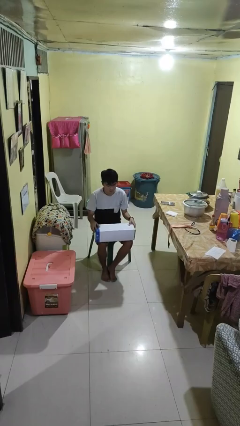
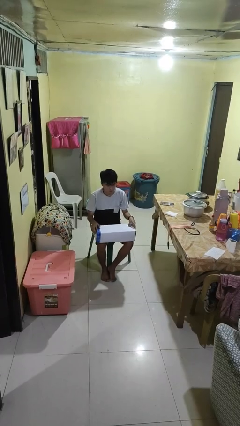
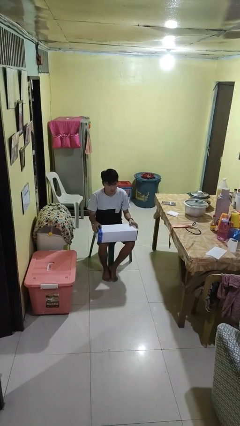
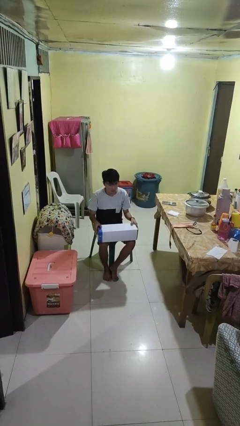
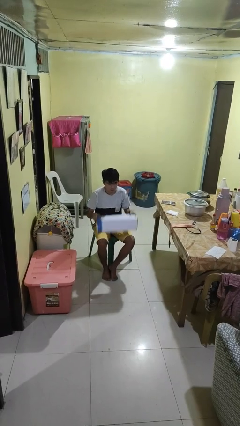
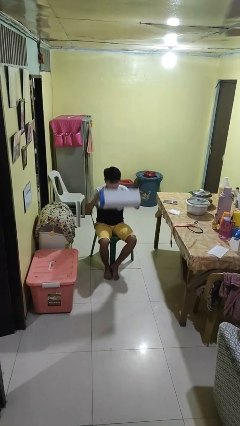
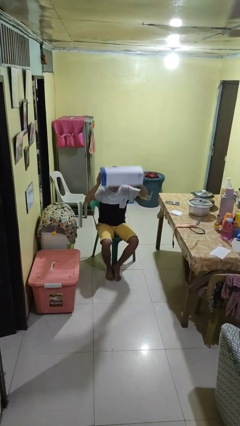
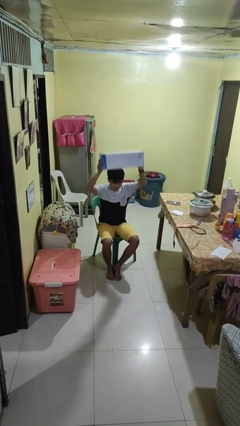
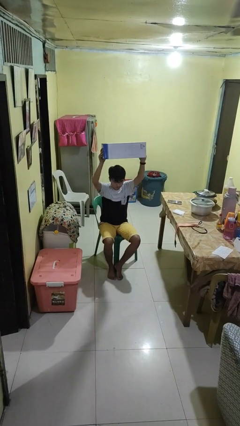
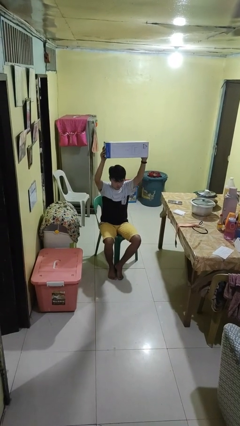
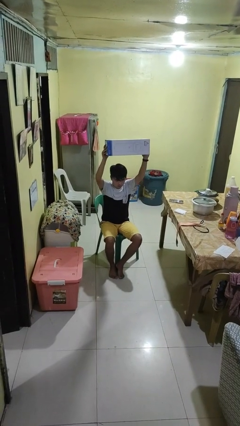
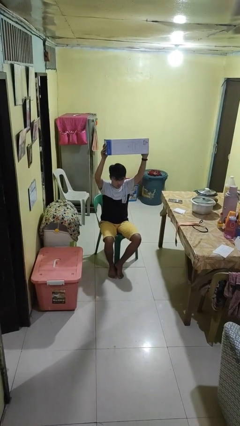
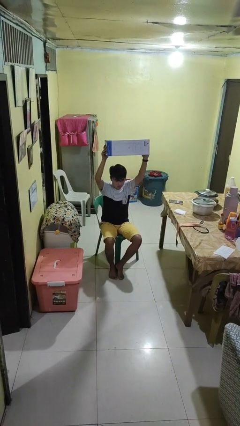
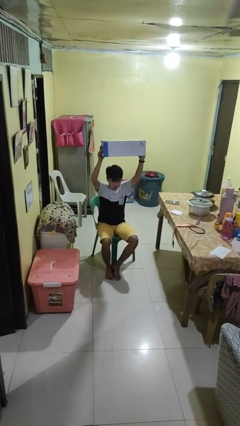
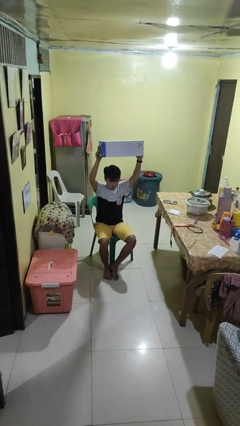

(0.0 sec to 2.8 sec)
person holds object above head

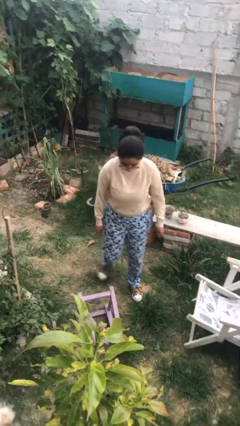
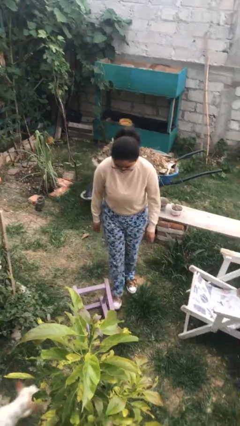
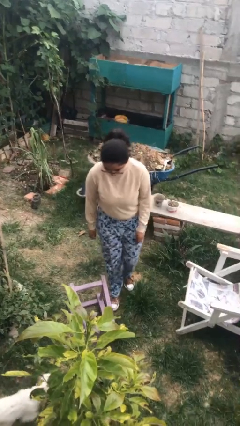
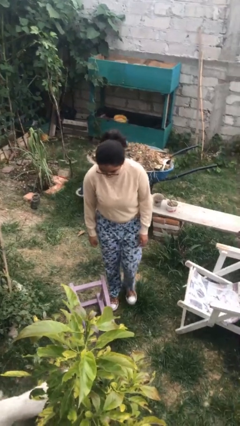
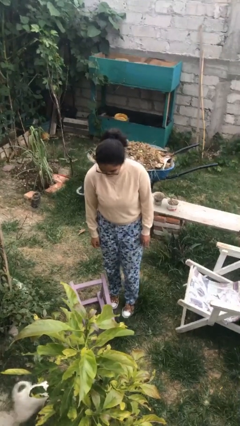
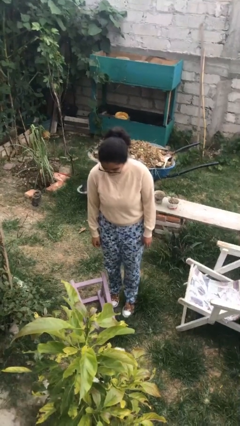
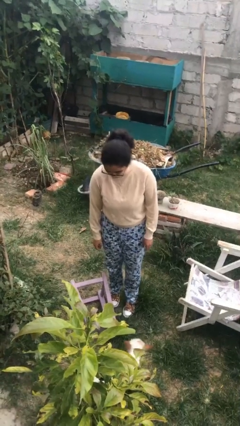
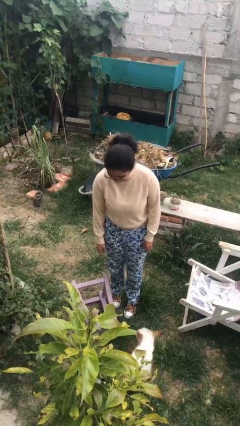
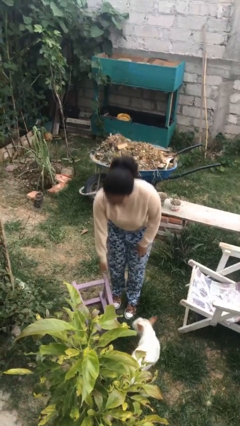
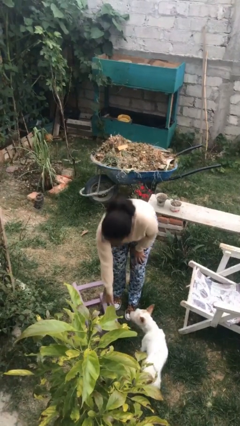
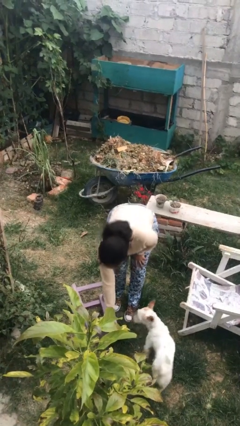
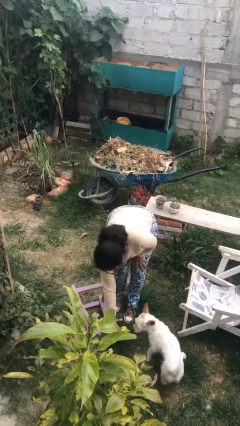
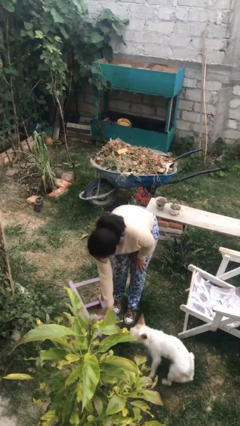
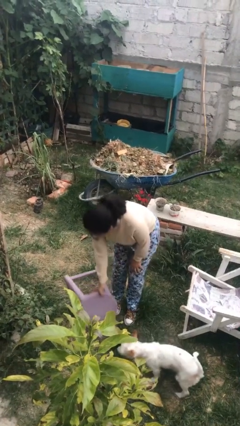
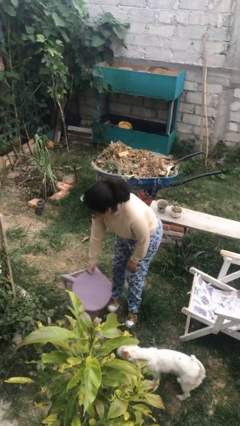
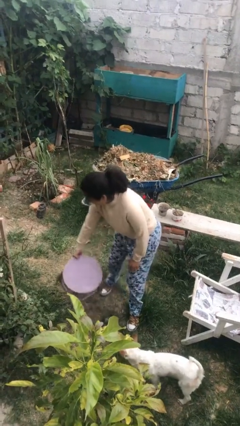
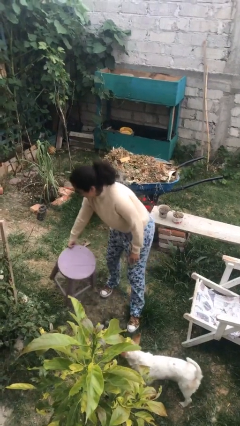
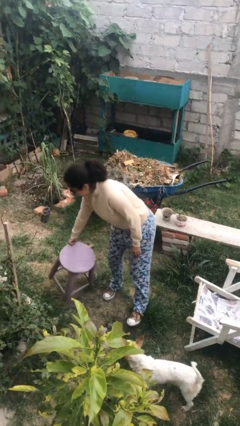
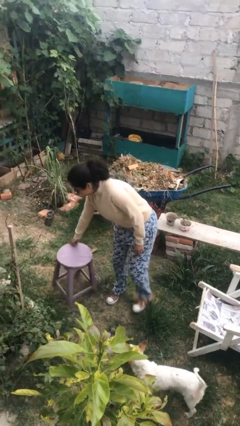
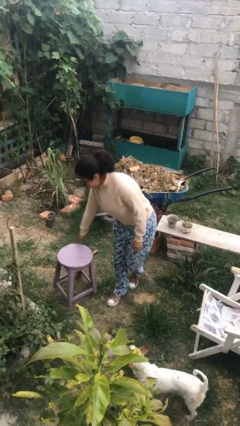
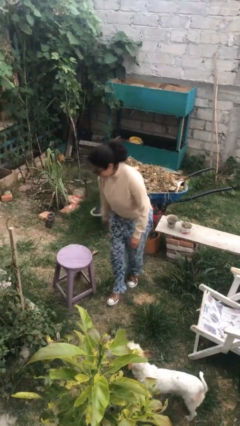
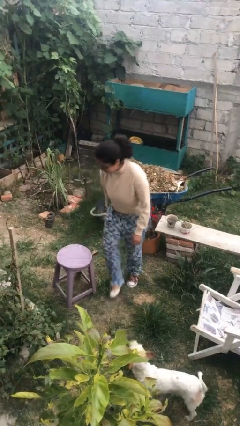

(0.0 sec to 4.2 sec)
person sets upright furniture

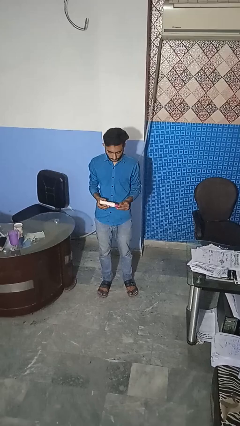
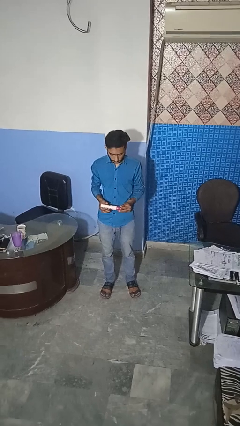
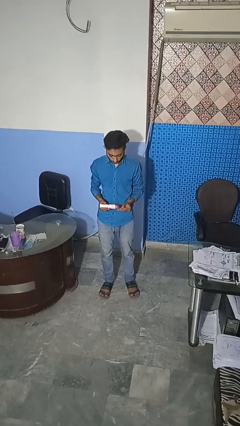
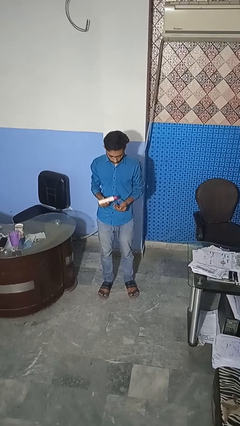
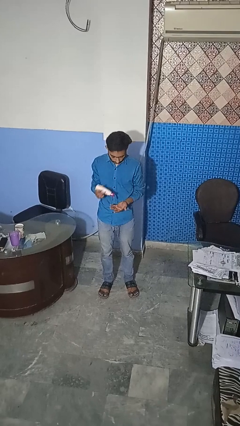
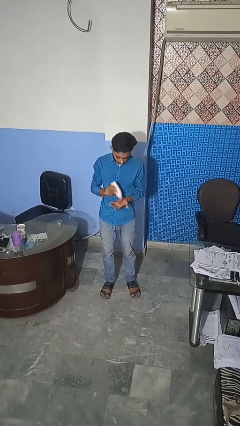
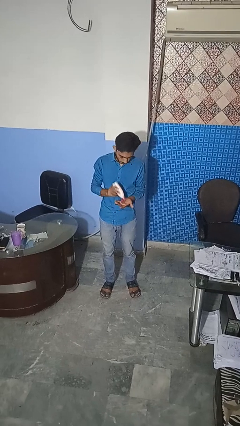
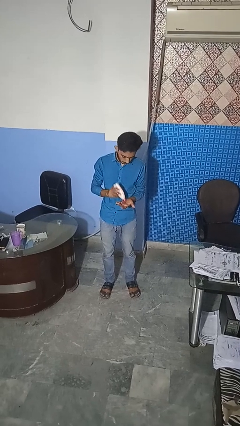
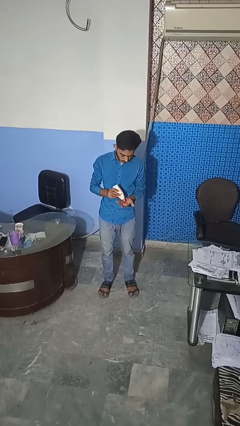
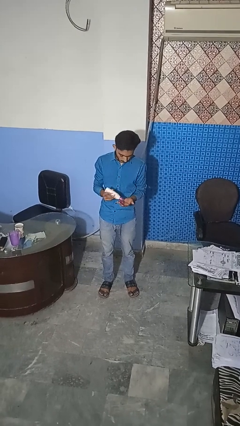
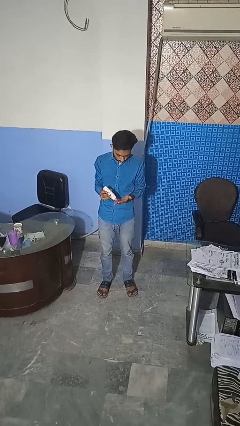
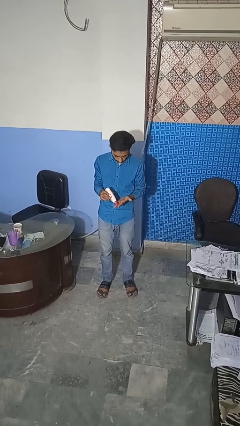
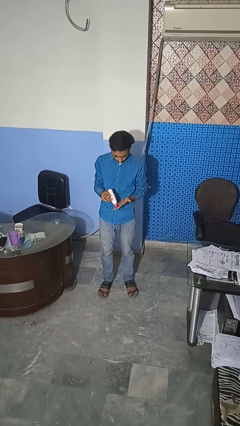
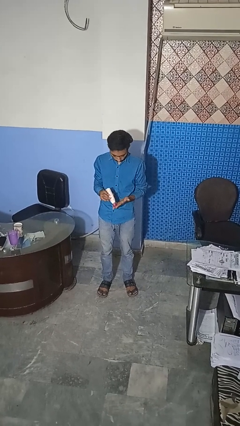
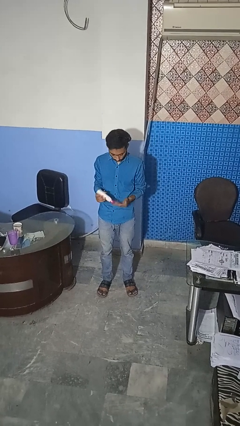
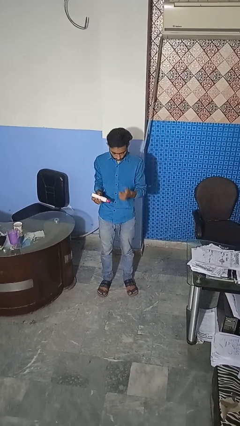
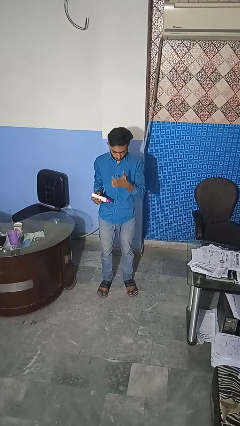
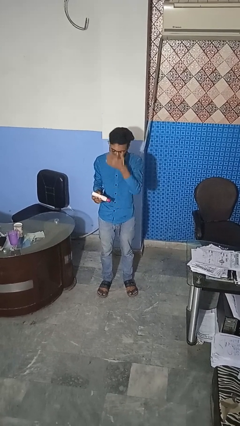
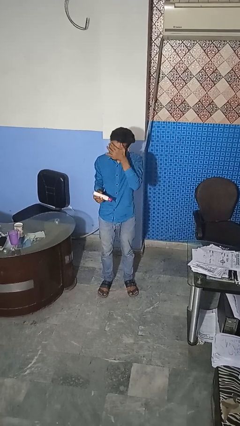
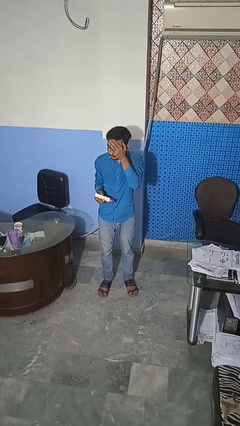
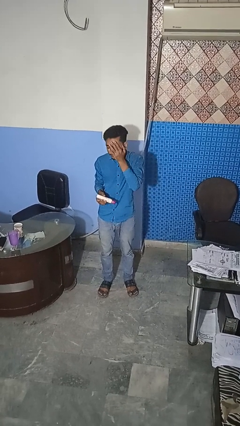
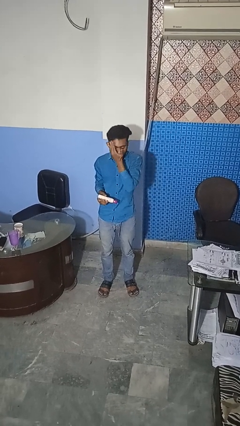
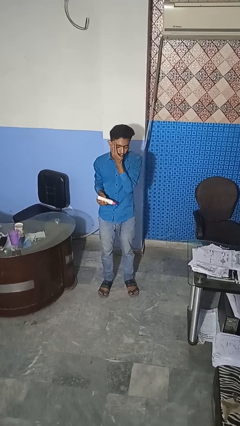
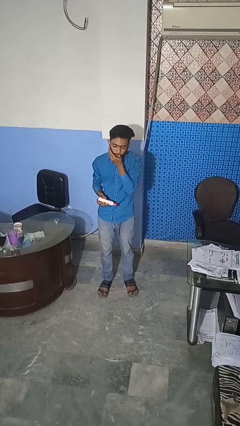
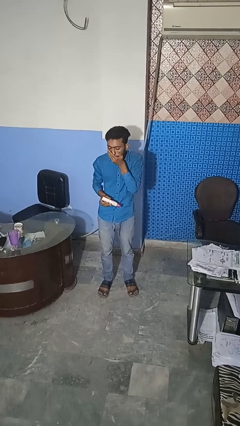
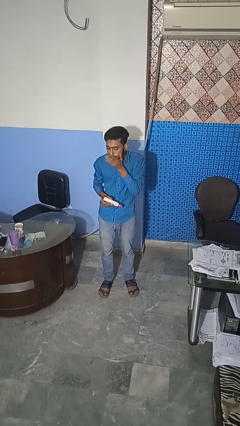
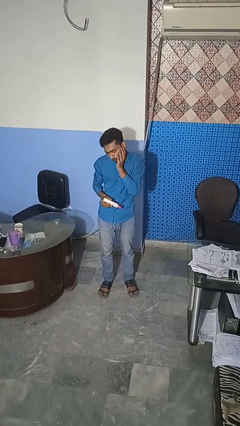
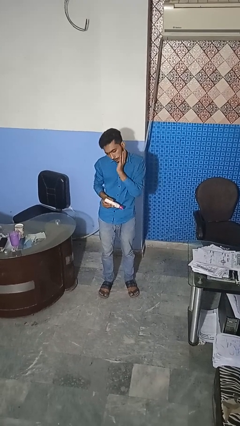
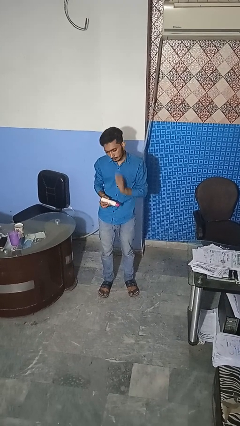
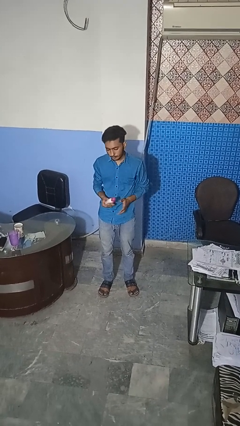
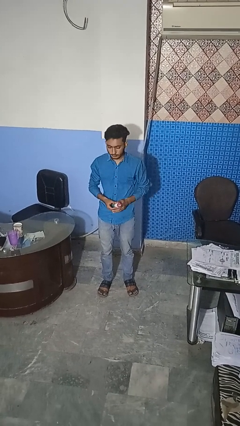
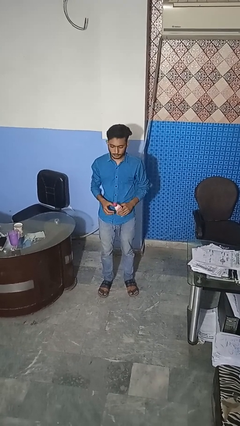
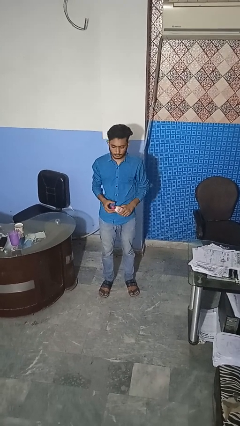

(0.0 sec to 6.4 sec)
person applies facial moisturizer

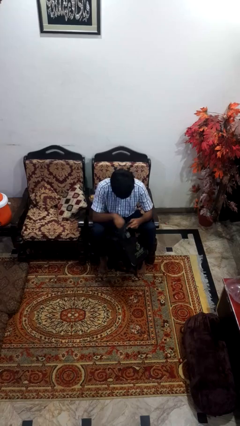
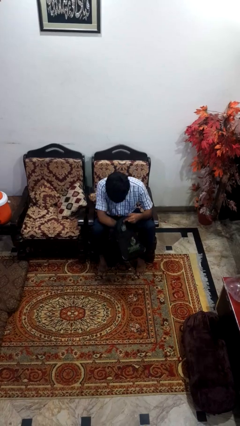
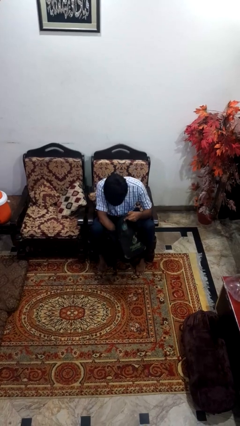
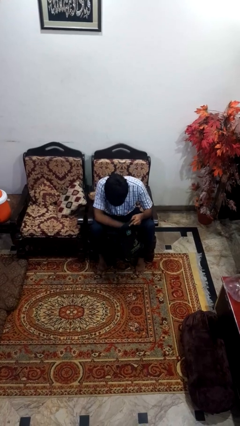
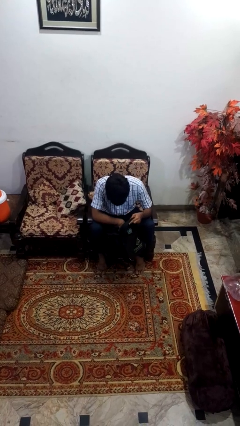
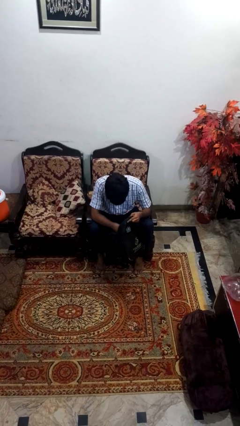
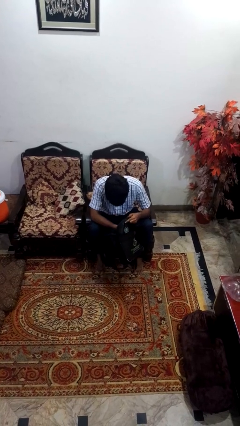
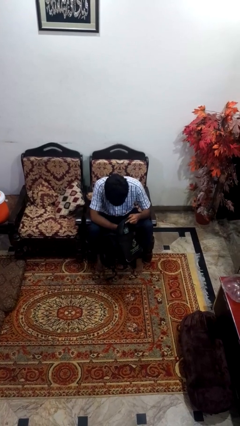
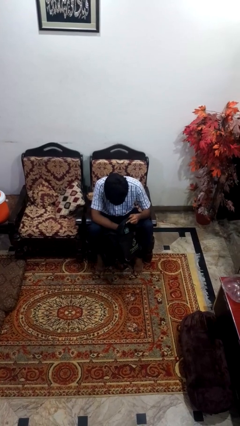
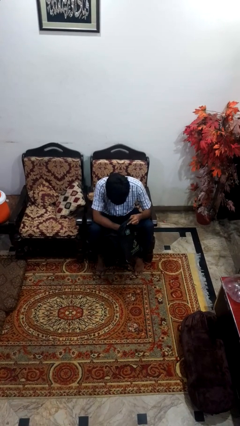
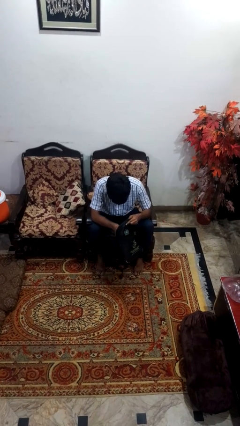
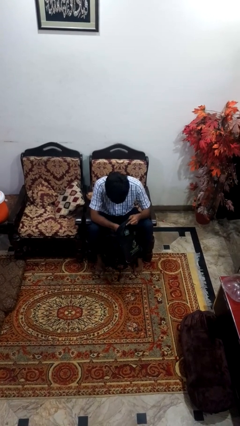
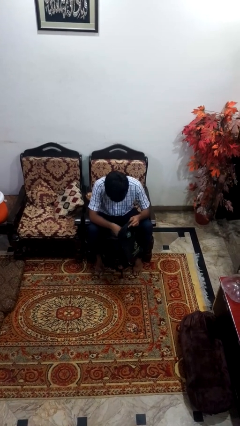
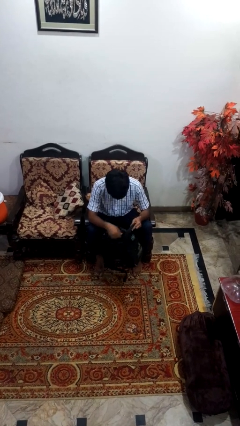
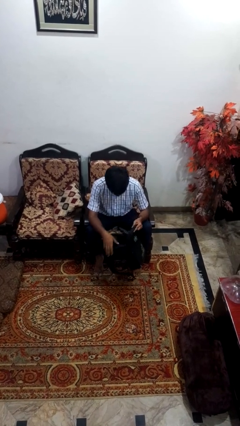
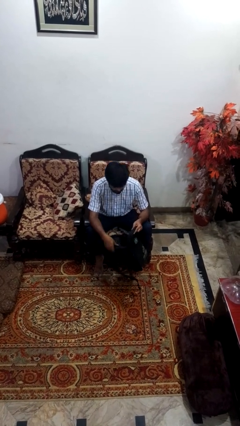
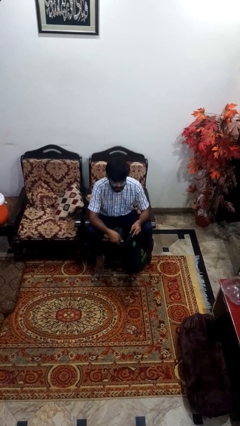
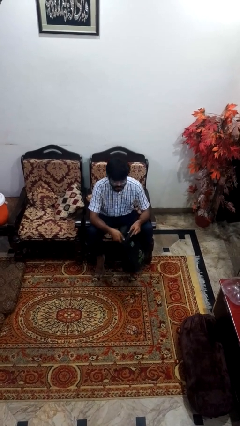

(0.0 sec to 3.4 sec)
person searches in bag

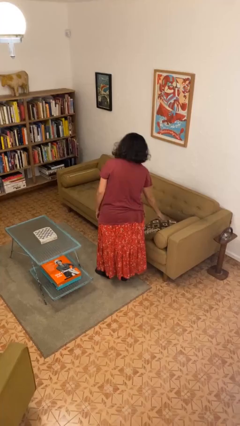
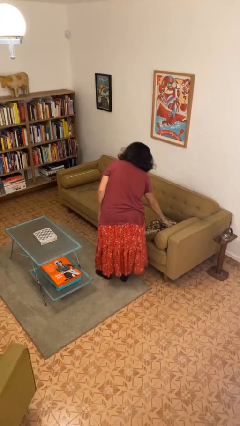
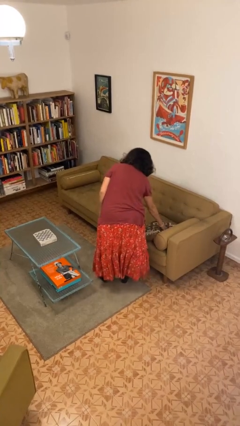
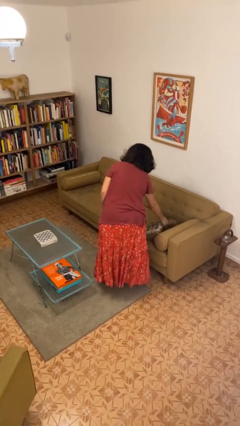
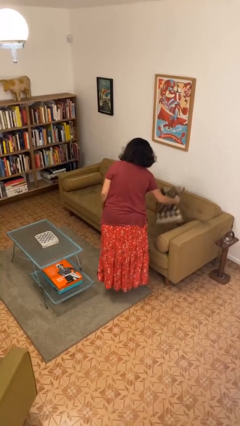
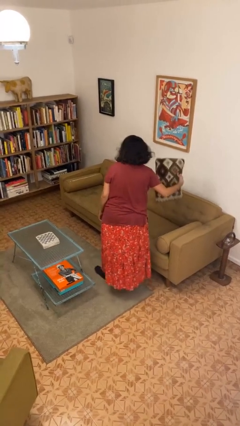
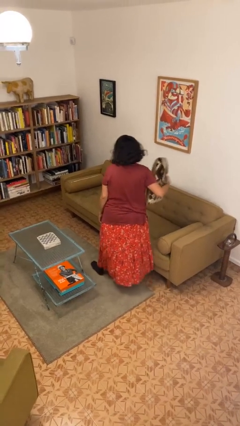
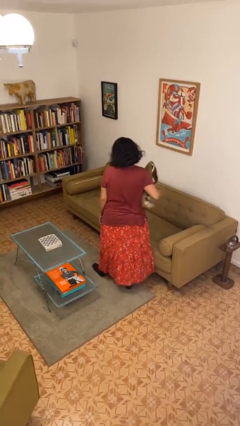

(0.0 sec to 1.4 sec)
person picks up object from couch
